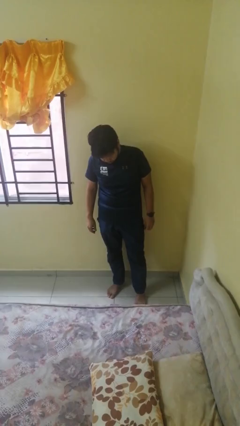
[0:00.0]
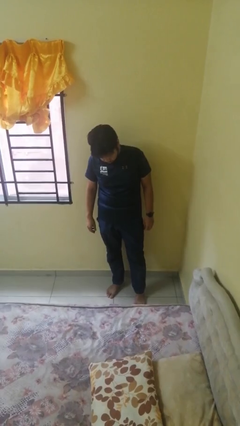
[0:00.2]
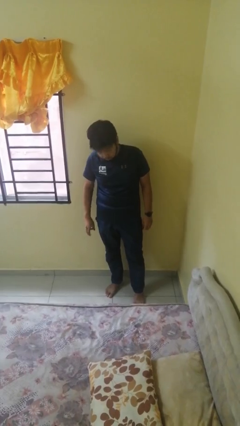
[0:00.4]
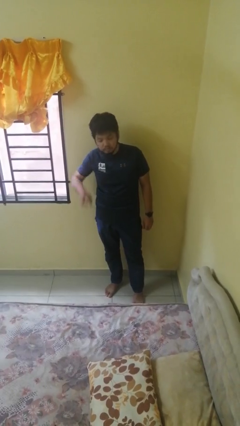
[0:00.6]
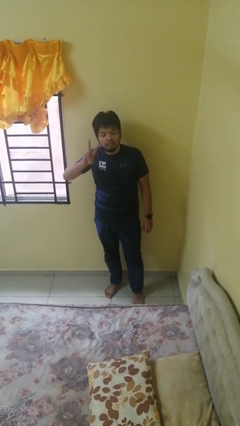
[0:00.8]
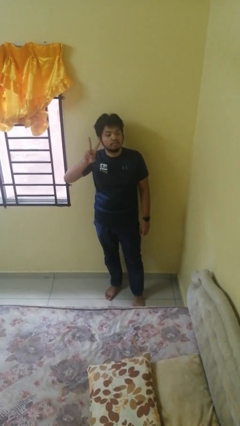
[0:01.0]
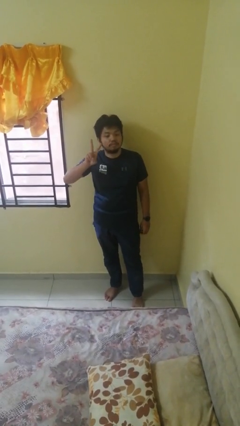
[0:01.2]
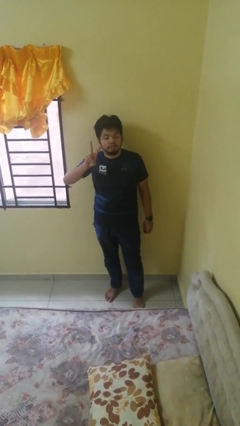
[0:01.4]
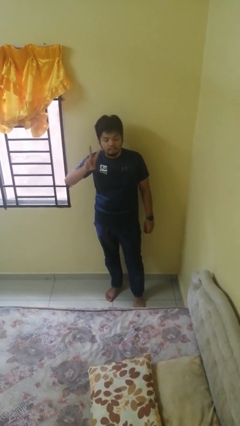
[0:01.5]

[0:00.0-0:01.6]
person gestures peace

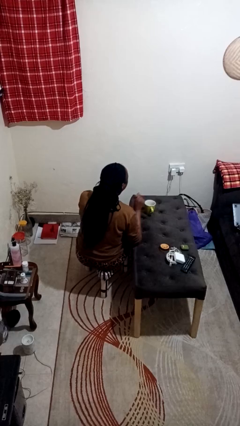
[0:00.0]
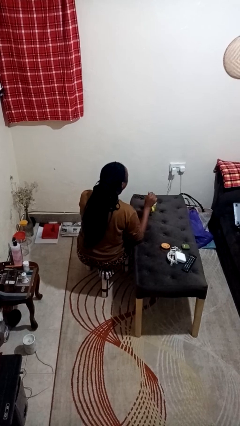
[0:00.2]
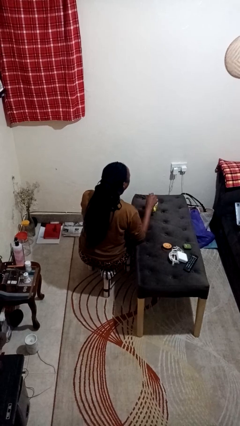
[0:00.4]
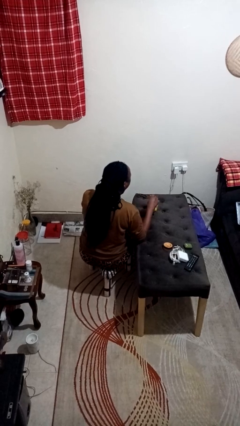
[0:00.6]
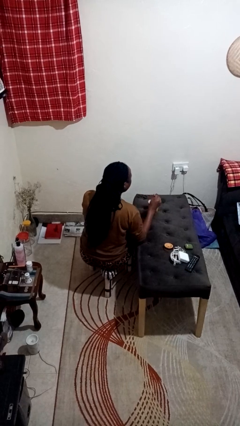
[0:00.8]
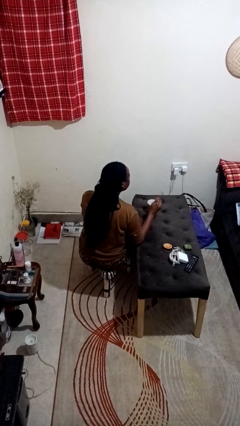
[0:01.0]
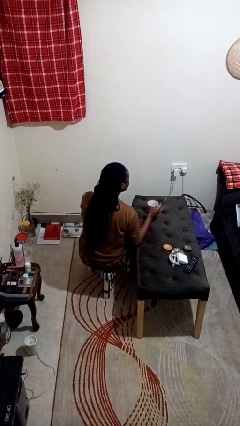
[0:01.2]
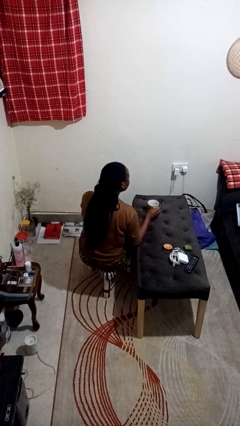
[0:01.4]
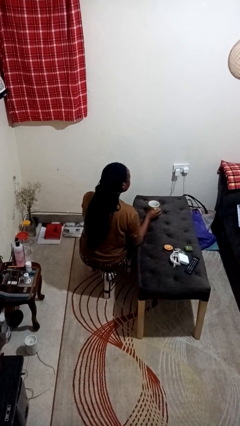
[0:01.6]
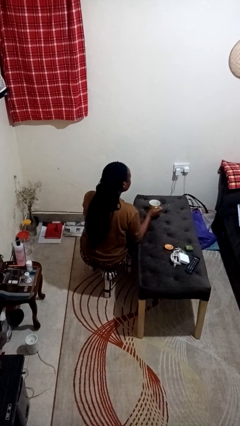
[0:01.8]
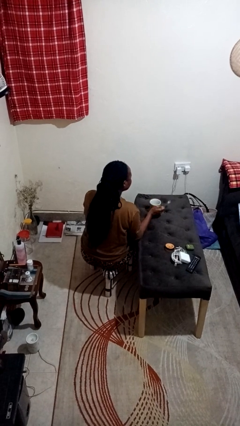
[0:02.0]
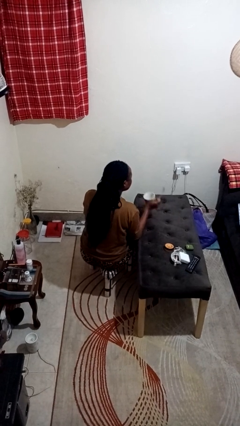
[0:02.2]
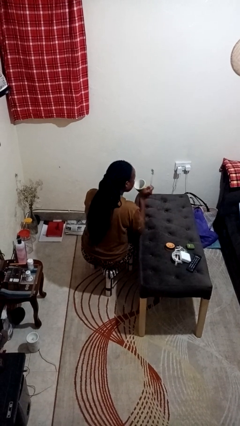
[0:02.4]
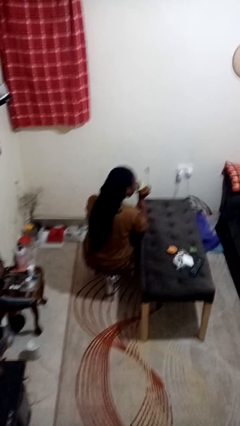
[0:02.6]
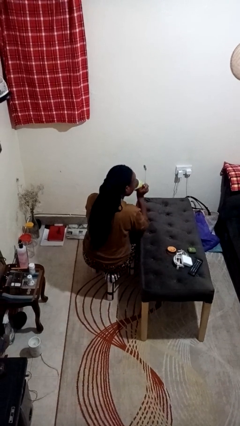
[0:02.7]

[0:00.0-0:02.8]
person stirs mug

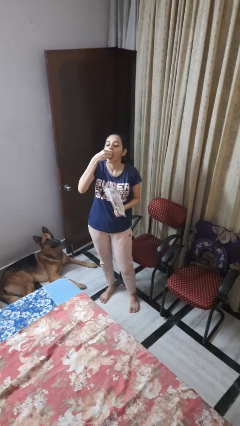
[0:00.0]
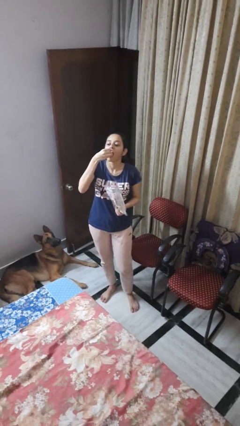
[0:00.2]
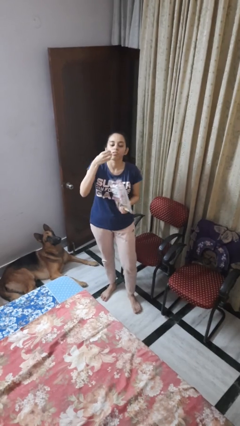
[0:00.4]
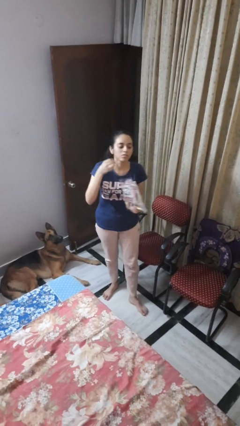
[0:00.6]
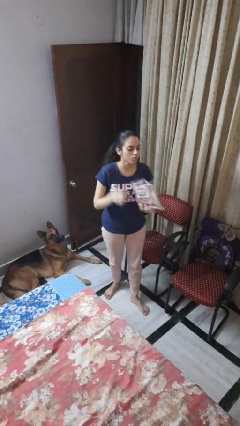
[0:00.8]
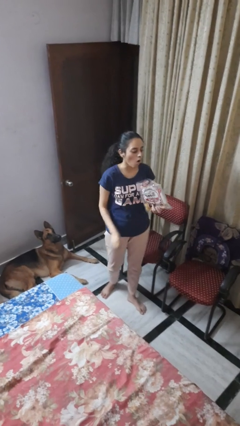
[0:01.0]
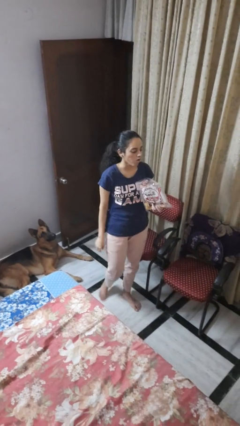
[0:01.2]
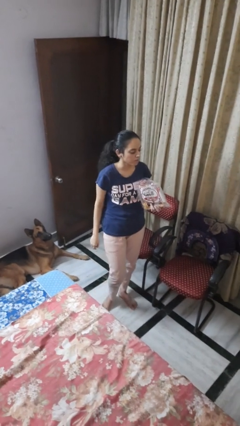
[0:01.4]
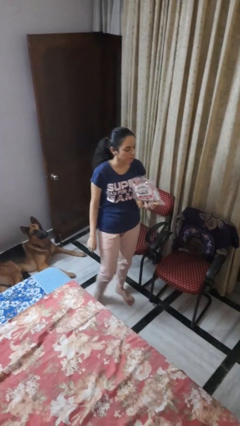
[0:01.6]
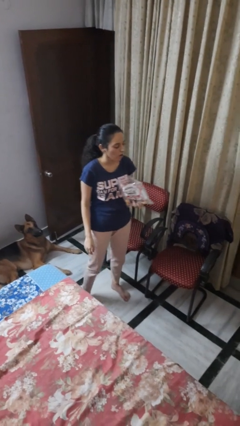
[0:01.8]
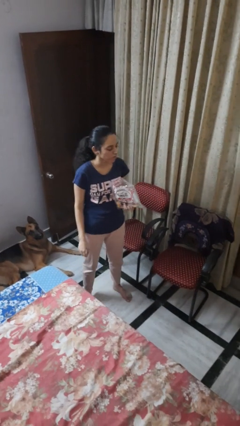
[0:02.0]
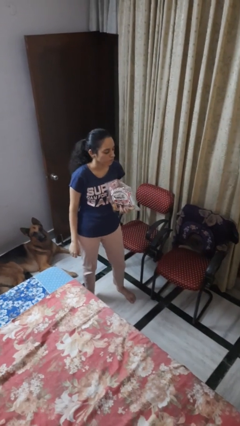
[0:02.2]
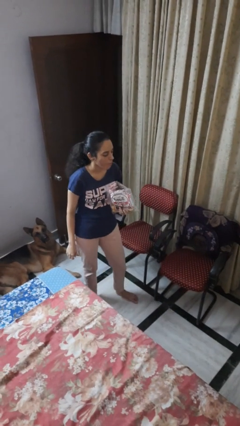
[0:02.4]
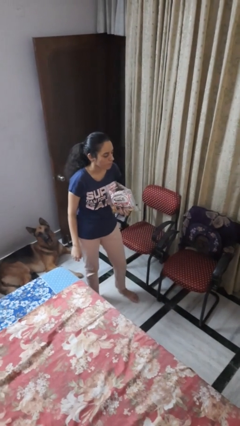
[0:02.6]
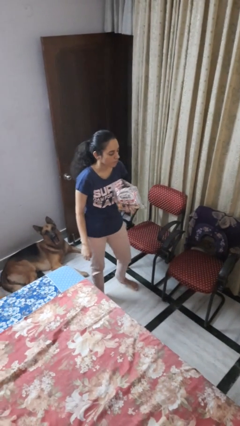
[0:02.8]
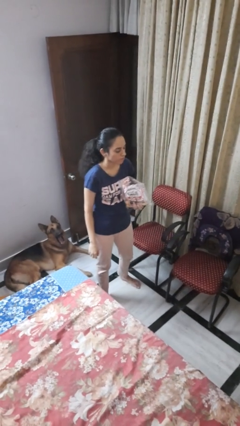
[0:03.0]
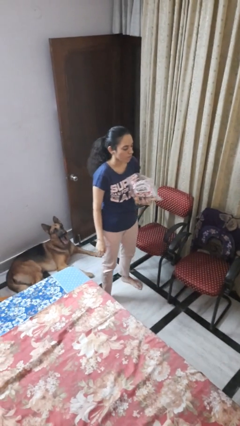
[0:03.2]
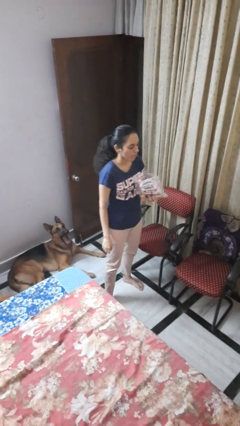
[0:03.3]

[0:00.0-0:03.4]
person eats snack from bag

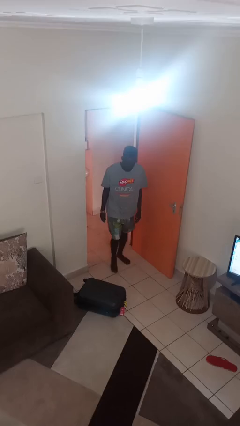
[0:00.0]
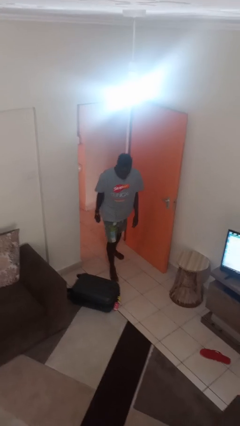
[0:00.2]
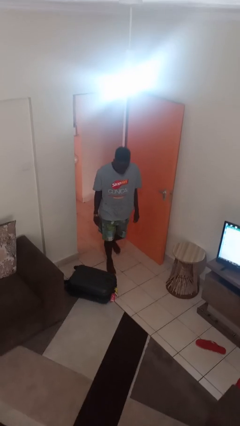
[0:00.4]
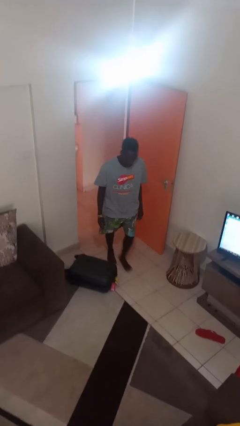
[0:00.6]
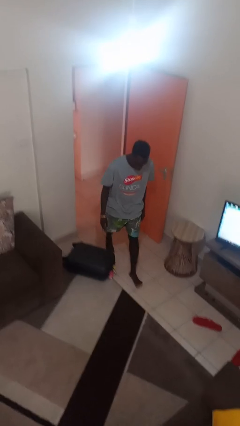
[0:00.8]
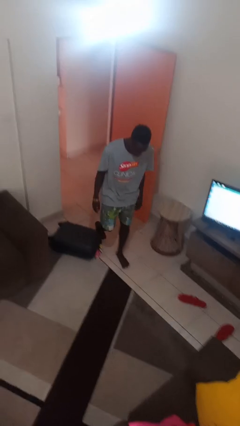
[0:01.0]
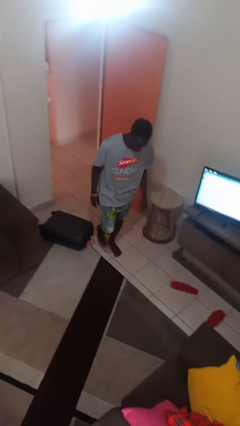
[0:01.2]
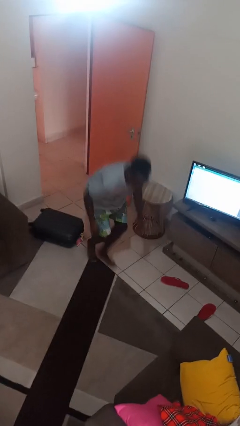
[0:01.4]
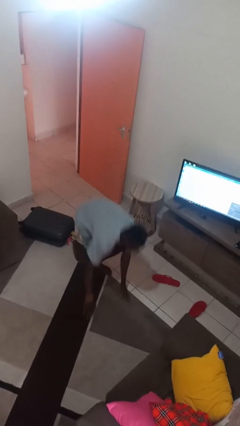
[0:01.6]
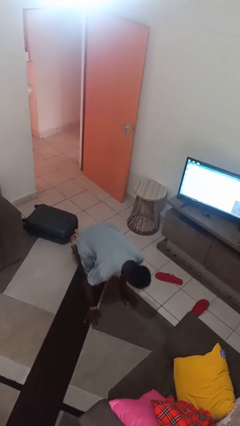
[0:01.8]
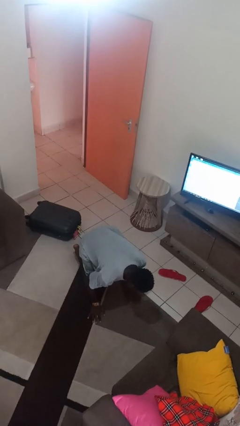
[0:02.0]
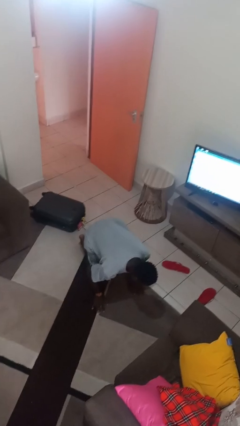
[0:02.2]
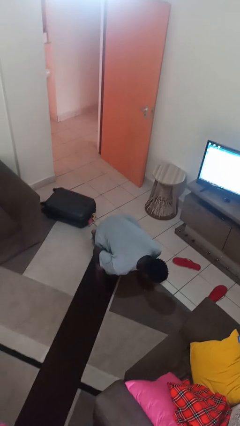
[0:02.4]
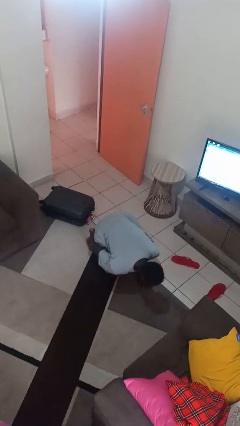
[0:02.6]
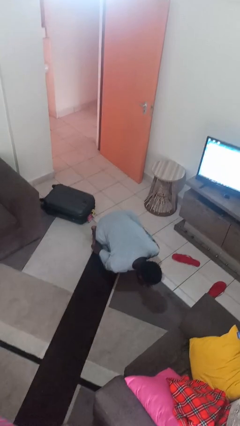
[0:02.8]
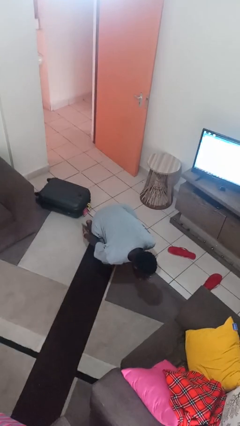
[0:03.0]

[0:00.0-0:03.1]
person trips on object on floor

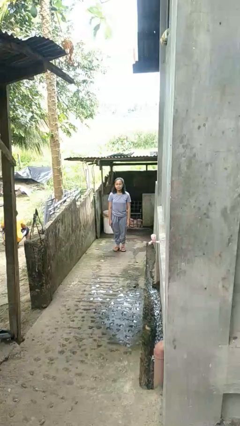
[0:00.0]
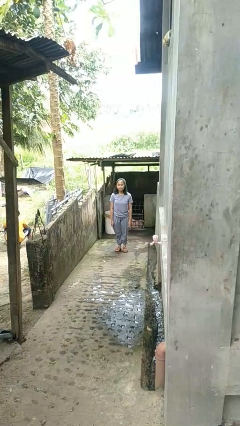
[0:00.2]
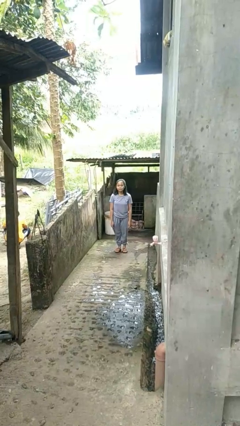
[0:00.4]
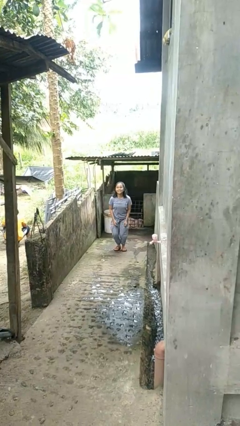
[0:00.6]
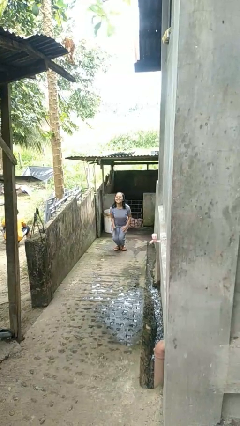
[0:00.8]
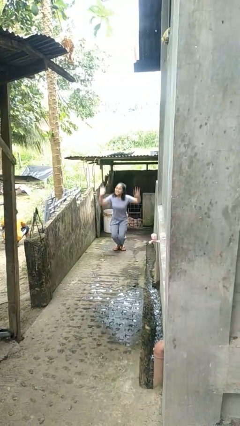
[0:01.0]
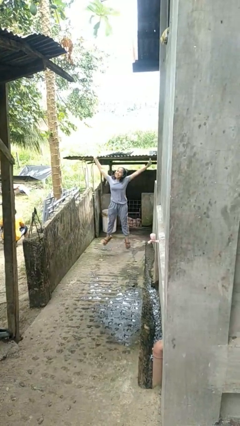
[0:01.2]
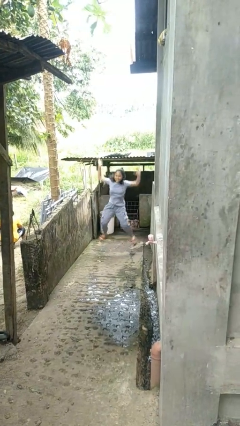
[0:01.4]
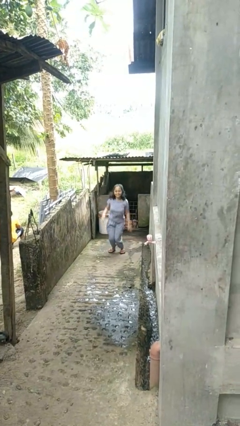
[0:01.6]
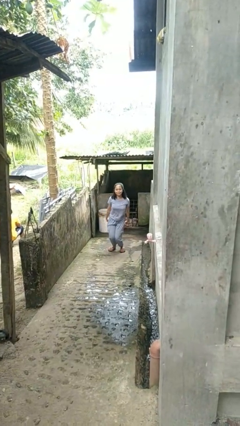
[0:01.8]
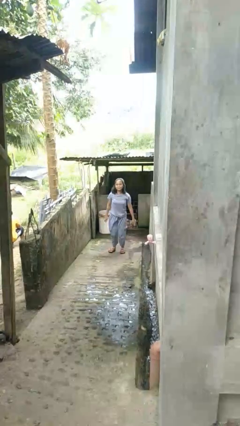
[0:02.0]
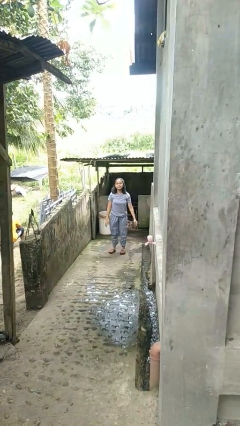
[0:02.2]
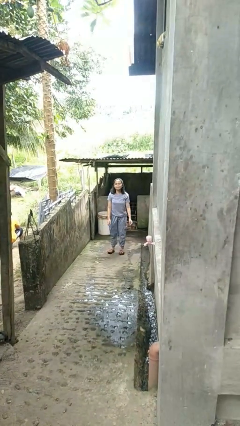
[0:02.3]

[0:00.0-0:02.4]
person exercises with jumping jacks

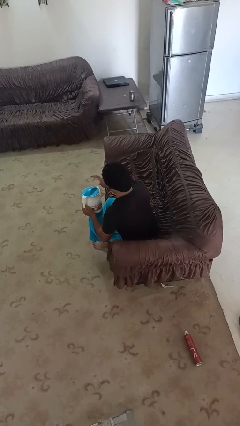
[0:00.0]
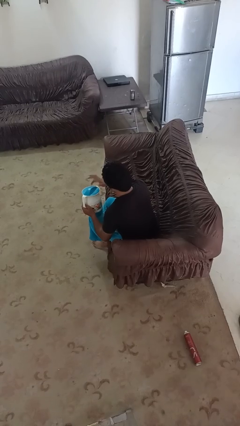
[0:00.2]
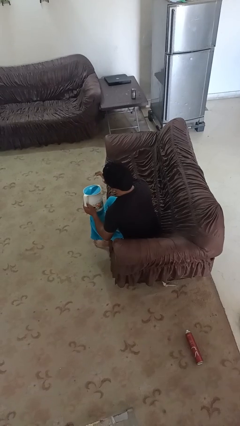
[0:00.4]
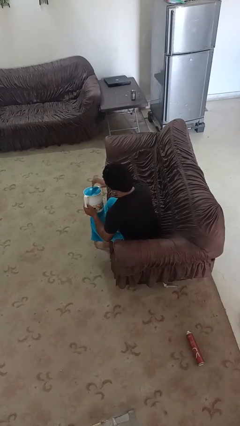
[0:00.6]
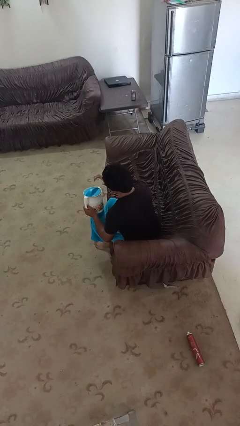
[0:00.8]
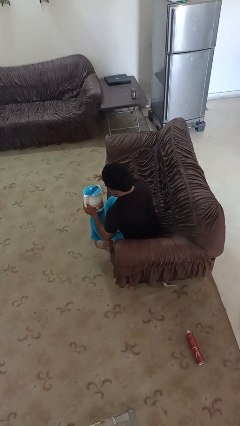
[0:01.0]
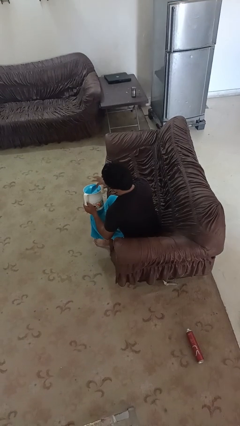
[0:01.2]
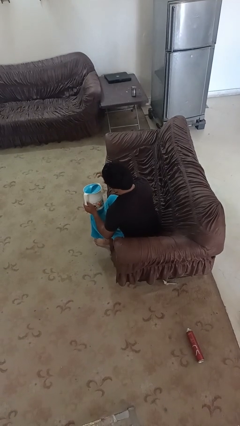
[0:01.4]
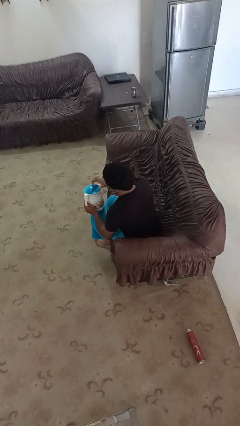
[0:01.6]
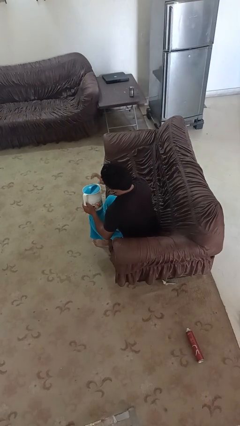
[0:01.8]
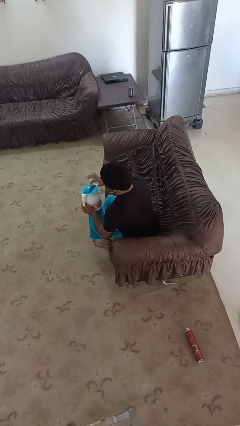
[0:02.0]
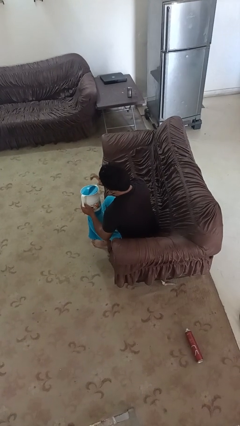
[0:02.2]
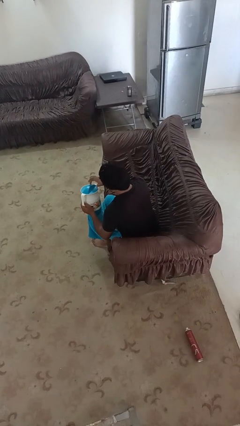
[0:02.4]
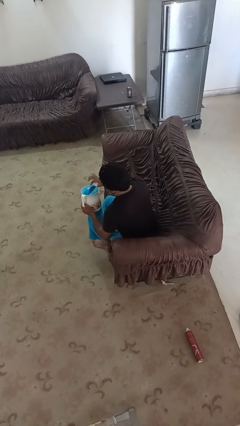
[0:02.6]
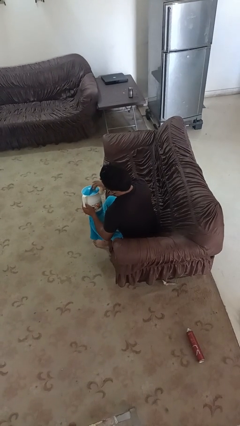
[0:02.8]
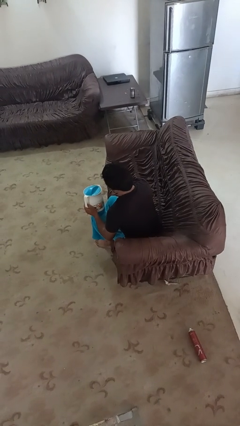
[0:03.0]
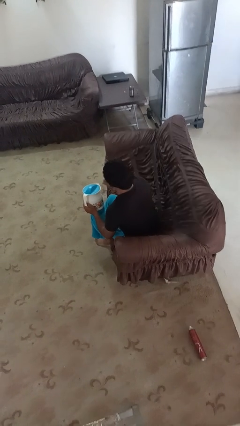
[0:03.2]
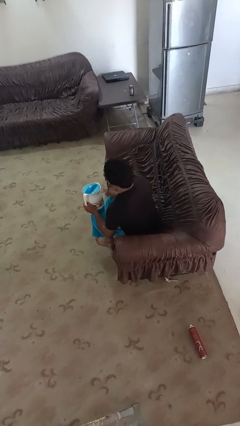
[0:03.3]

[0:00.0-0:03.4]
person taps object with finger

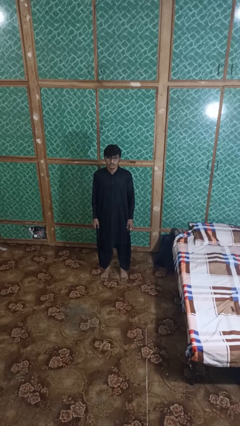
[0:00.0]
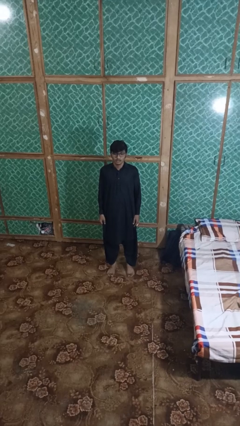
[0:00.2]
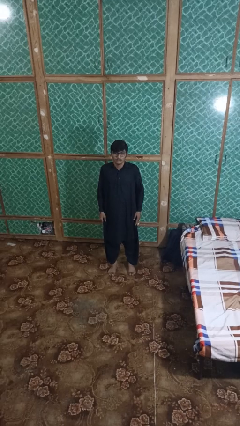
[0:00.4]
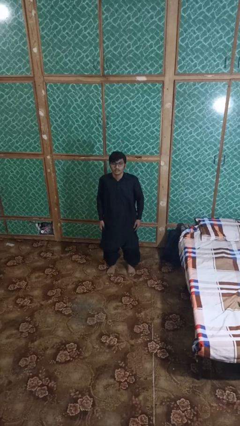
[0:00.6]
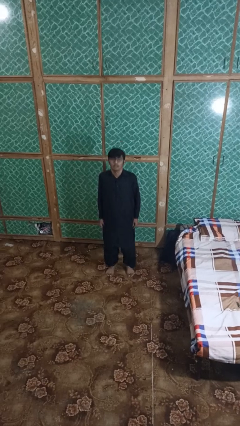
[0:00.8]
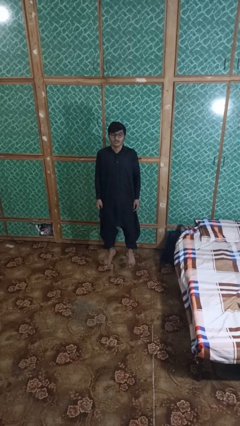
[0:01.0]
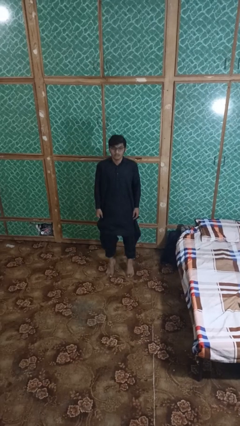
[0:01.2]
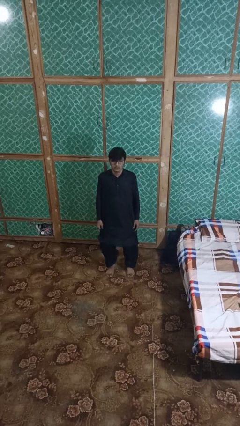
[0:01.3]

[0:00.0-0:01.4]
person jumps
